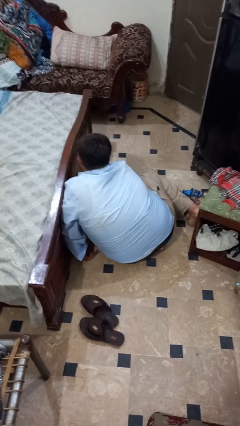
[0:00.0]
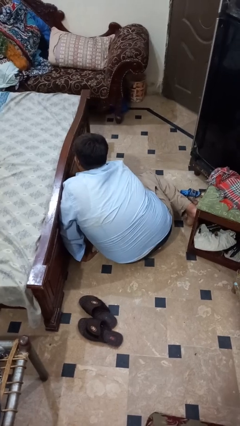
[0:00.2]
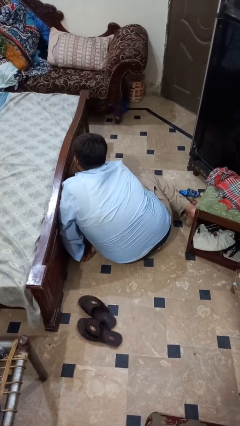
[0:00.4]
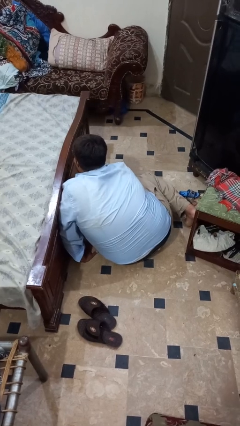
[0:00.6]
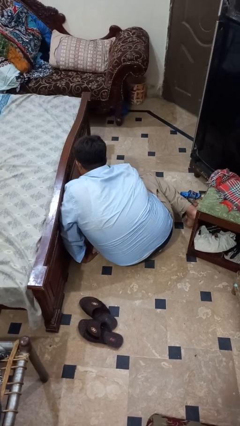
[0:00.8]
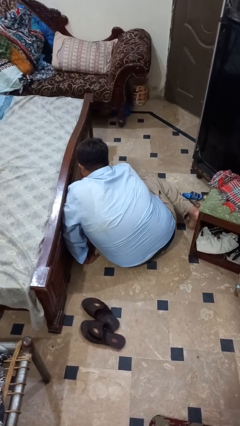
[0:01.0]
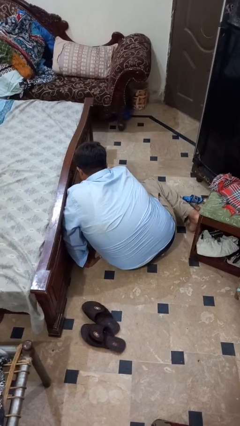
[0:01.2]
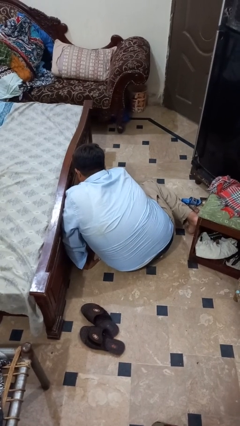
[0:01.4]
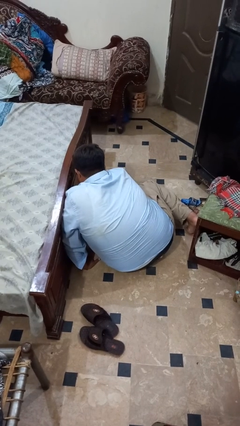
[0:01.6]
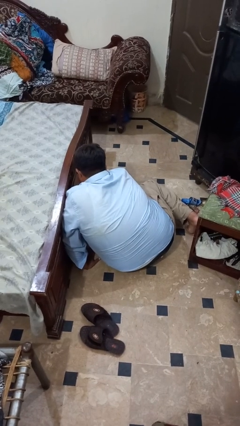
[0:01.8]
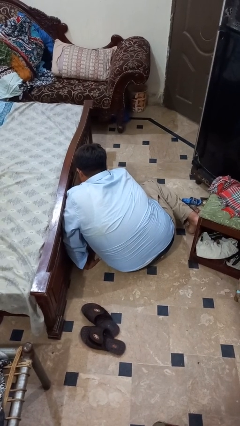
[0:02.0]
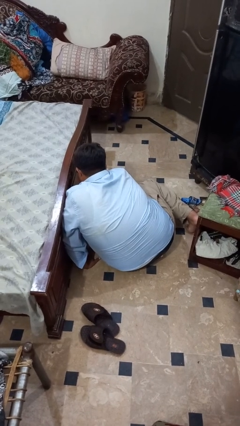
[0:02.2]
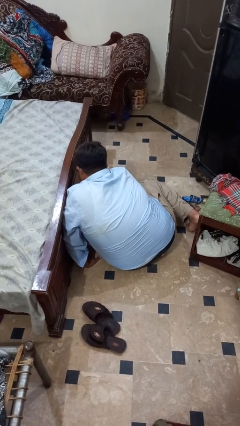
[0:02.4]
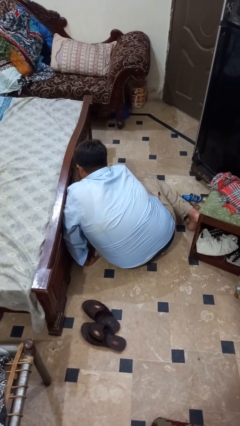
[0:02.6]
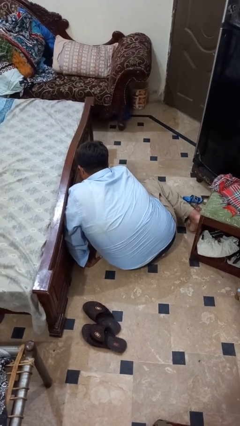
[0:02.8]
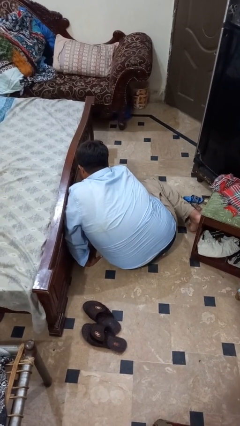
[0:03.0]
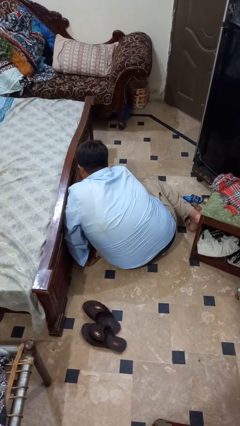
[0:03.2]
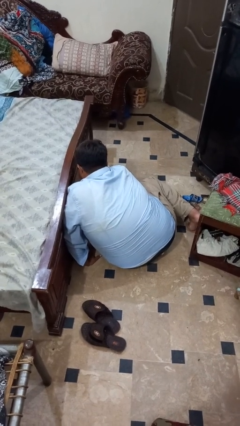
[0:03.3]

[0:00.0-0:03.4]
person searches under bed

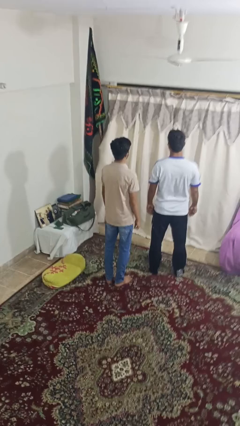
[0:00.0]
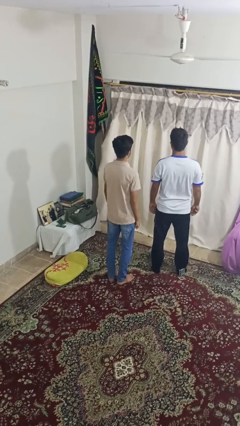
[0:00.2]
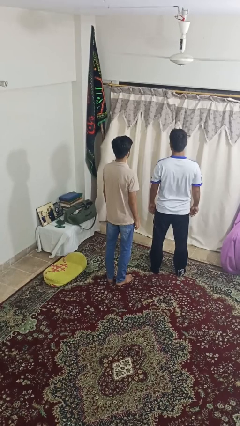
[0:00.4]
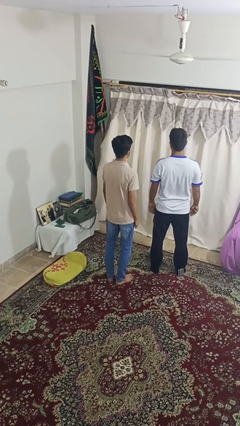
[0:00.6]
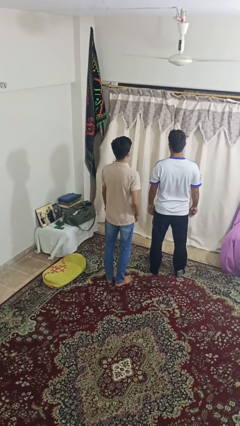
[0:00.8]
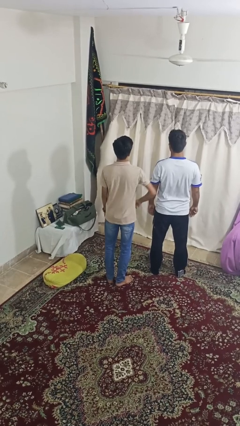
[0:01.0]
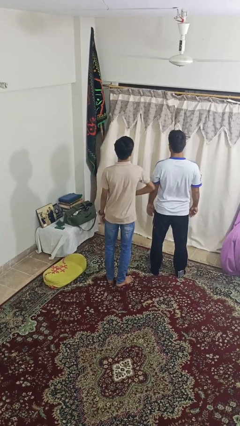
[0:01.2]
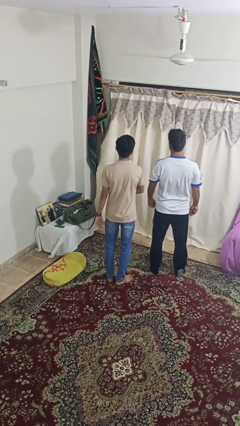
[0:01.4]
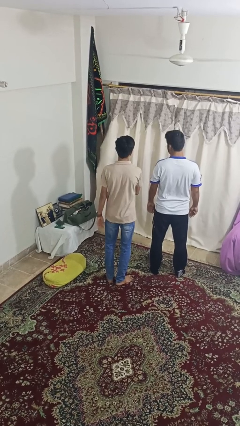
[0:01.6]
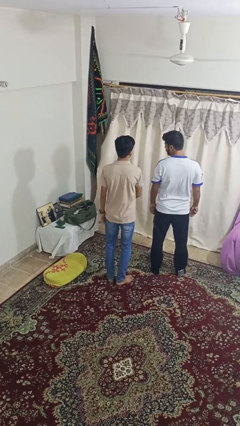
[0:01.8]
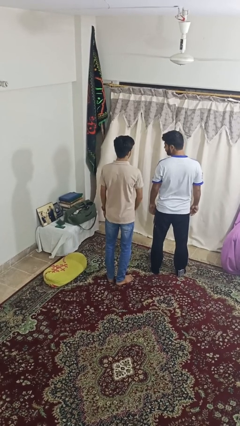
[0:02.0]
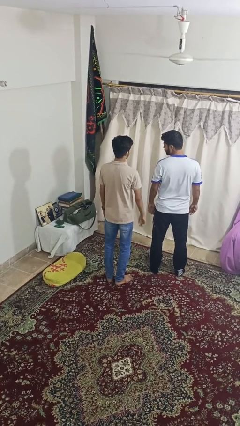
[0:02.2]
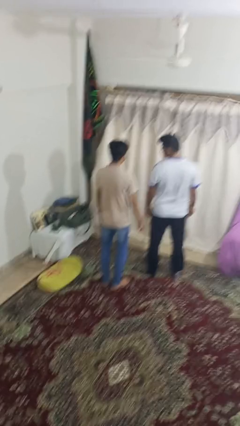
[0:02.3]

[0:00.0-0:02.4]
person nudges person with elbow

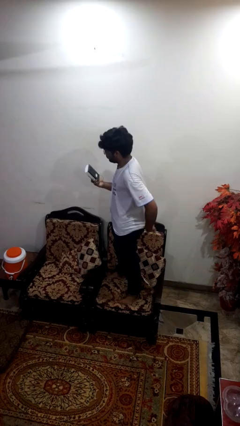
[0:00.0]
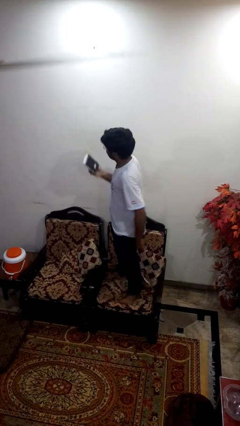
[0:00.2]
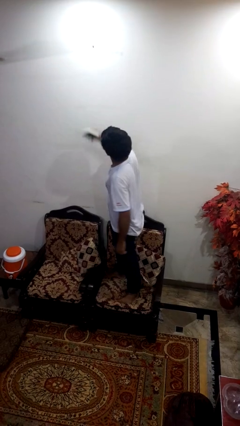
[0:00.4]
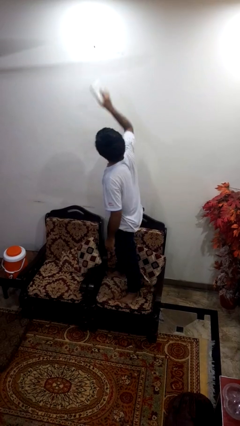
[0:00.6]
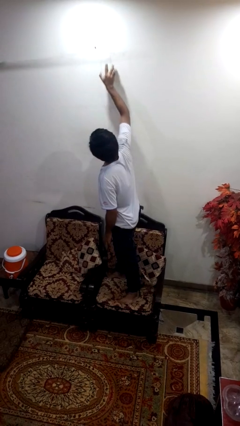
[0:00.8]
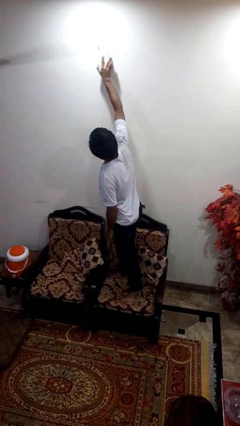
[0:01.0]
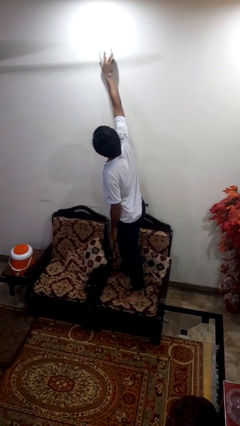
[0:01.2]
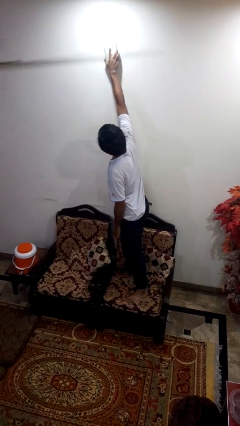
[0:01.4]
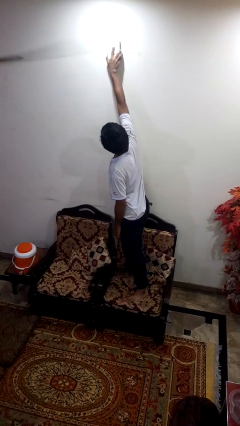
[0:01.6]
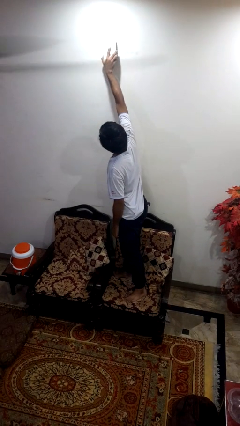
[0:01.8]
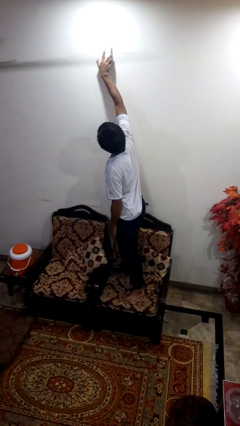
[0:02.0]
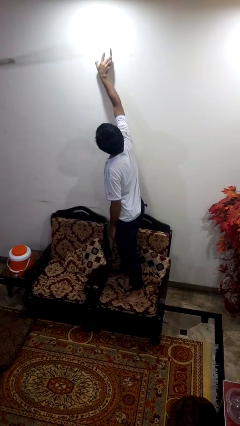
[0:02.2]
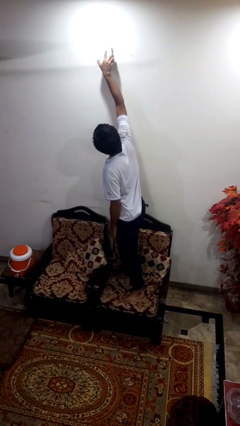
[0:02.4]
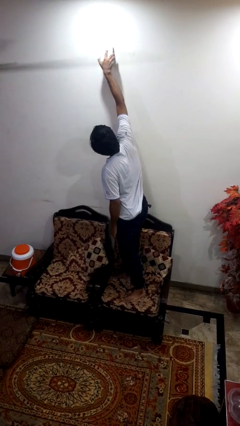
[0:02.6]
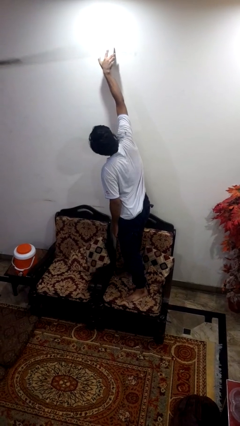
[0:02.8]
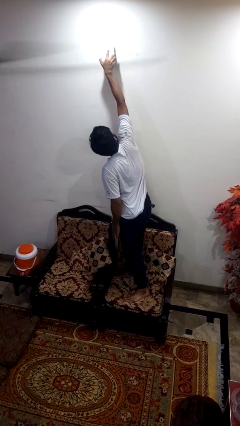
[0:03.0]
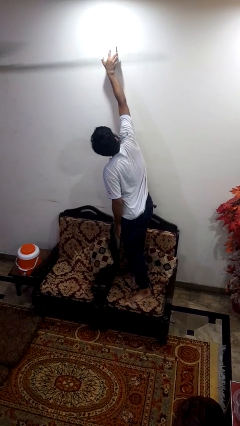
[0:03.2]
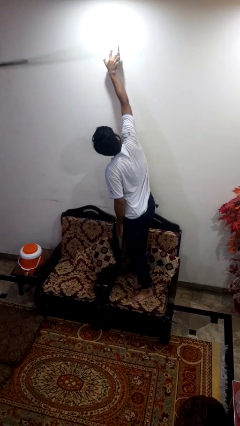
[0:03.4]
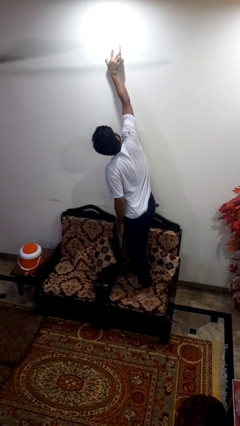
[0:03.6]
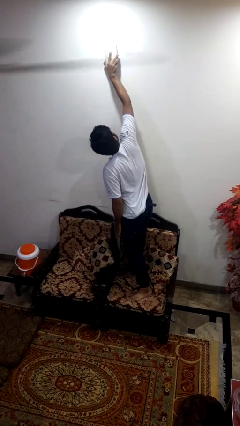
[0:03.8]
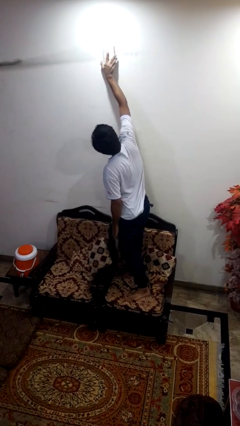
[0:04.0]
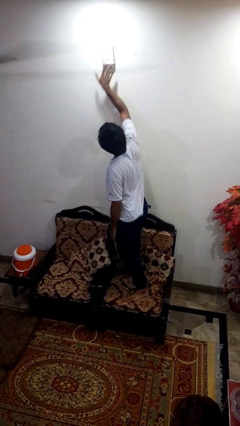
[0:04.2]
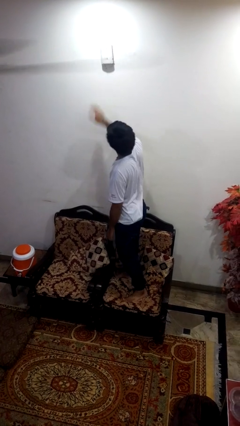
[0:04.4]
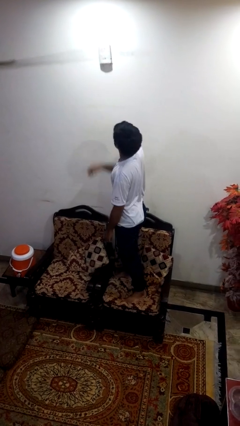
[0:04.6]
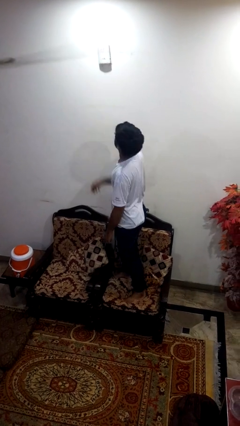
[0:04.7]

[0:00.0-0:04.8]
person puts up smoke detector

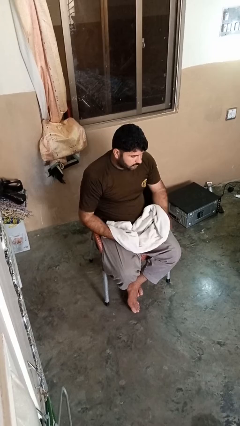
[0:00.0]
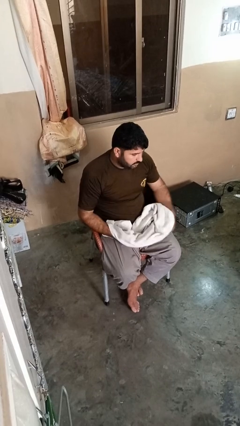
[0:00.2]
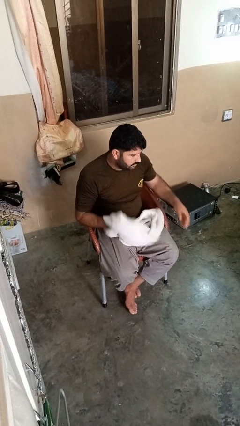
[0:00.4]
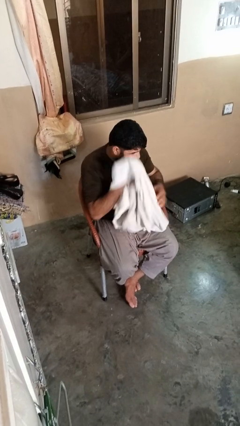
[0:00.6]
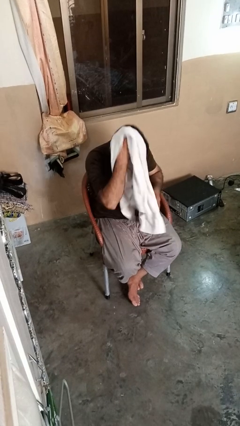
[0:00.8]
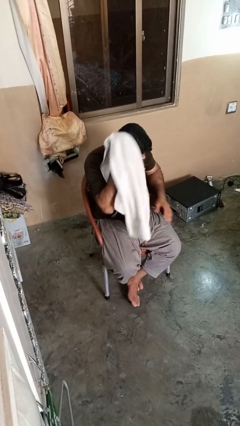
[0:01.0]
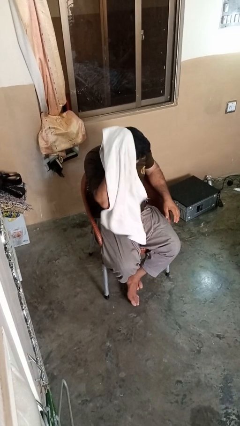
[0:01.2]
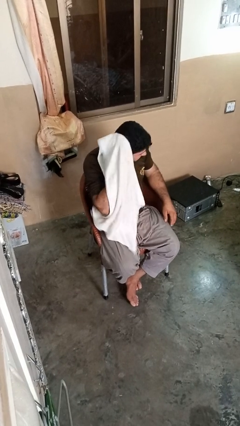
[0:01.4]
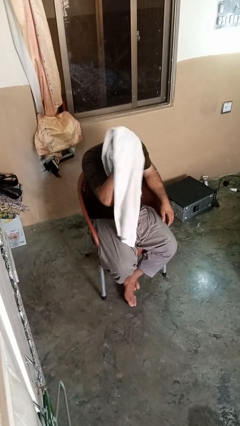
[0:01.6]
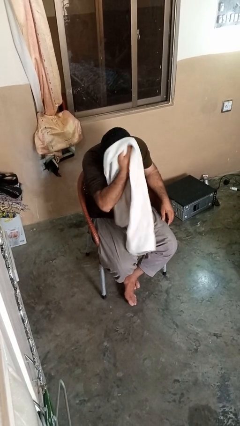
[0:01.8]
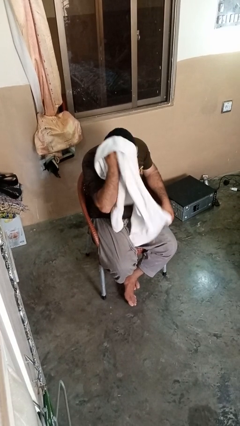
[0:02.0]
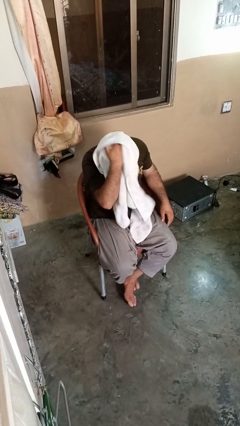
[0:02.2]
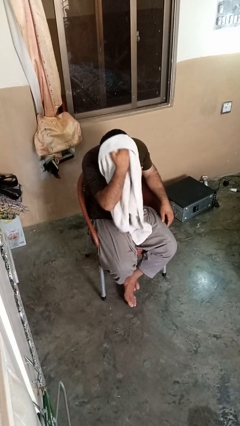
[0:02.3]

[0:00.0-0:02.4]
person dries hair with towel

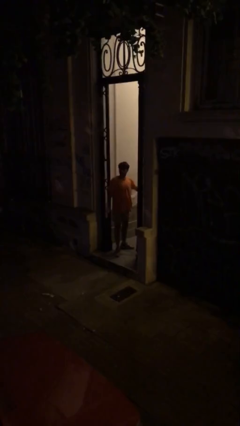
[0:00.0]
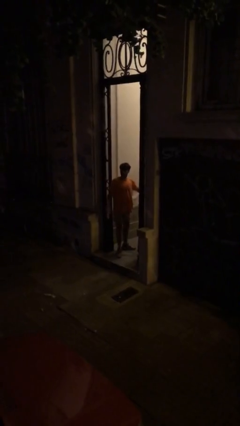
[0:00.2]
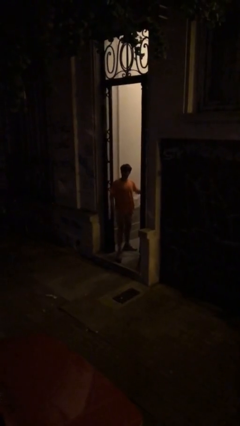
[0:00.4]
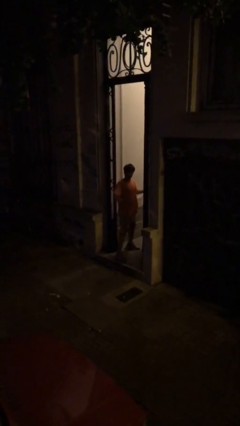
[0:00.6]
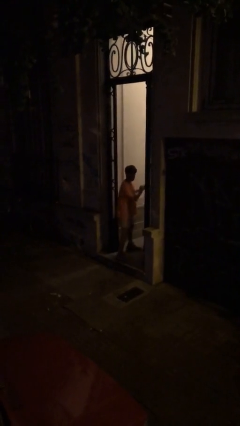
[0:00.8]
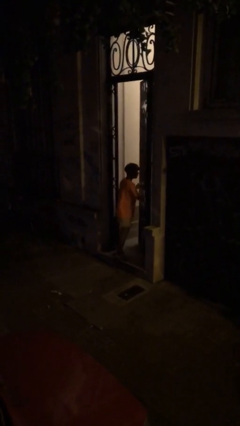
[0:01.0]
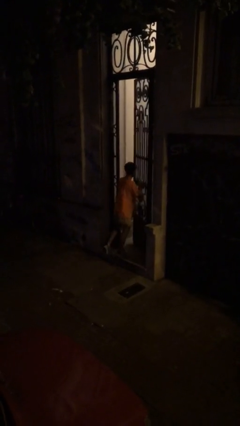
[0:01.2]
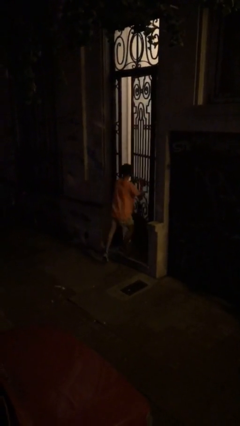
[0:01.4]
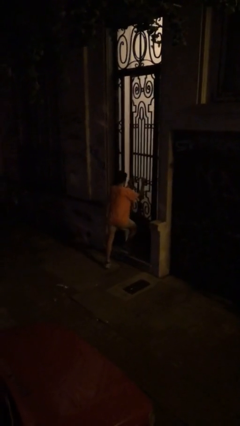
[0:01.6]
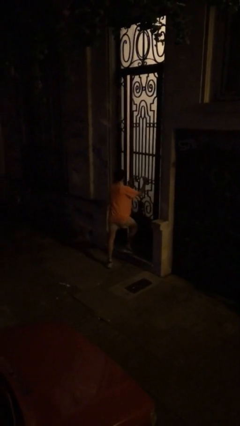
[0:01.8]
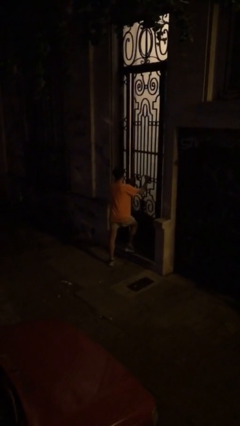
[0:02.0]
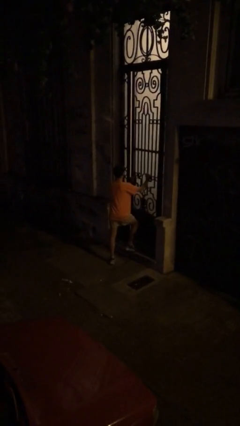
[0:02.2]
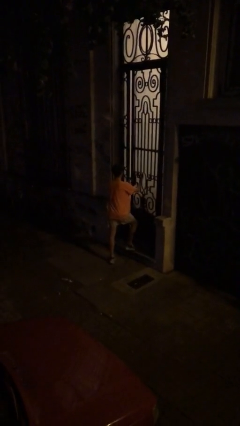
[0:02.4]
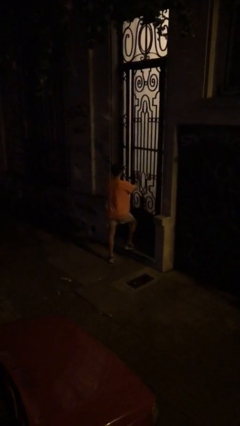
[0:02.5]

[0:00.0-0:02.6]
person closes facility door

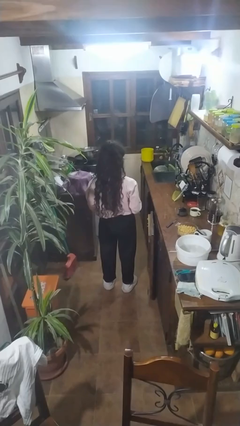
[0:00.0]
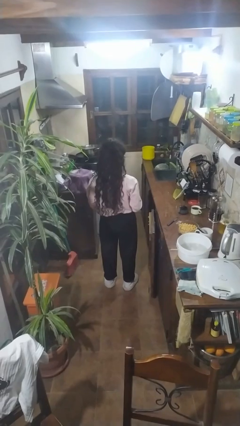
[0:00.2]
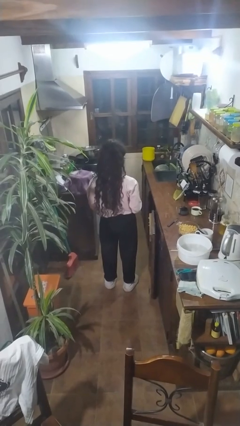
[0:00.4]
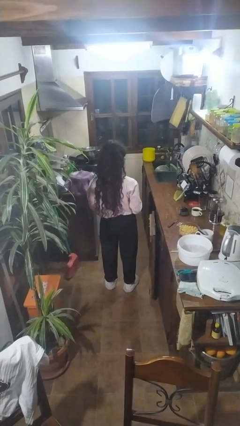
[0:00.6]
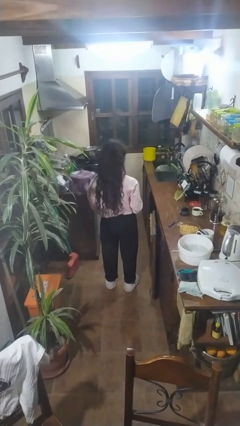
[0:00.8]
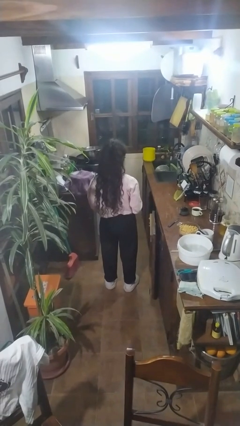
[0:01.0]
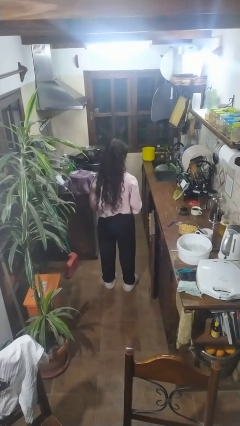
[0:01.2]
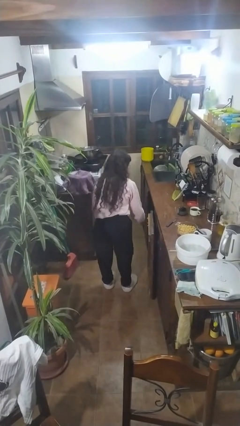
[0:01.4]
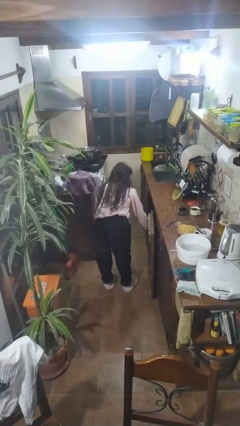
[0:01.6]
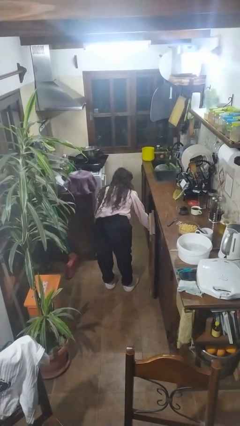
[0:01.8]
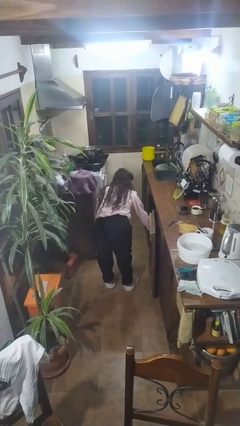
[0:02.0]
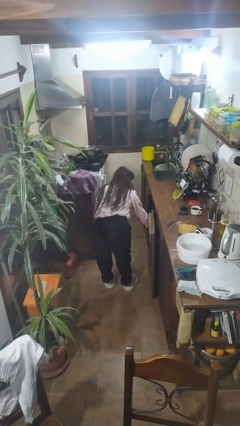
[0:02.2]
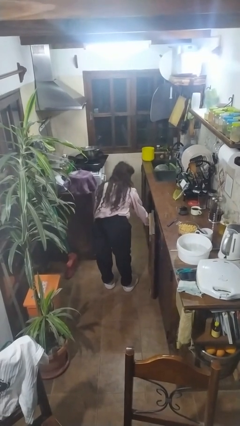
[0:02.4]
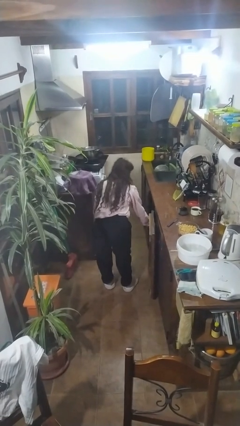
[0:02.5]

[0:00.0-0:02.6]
person puts object in cabinet
